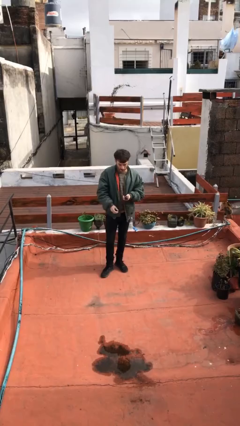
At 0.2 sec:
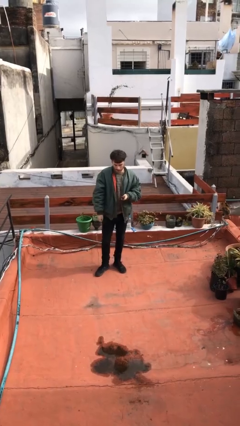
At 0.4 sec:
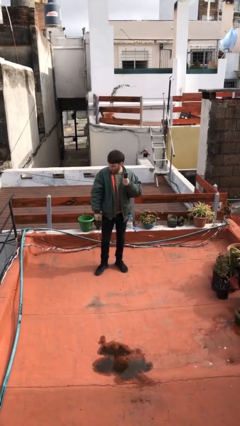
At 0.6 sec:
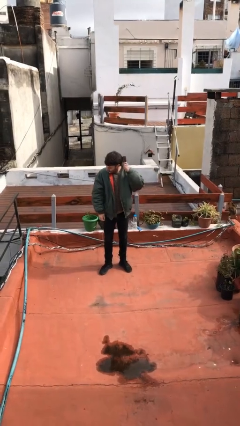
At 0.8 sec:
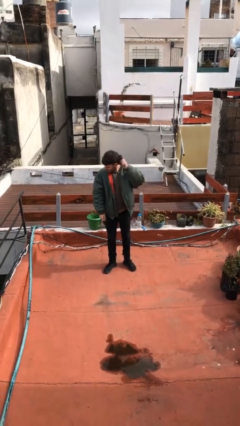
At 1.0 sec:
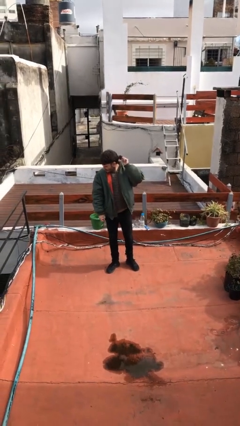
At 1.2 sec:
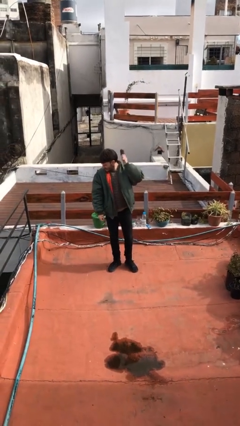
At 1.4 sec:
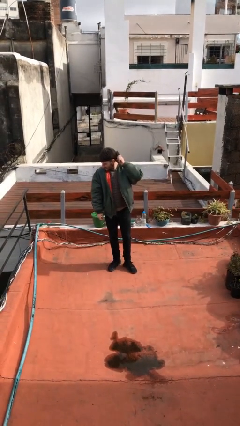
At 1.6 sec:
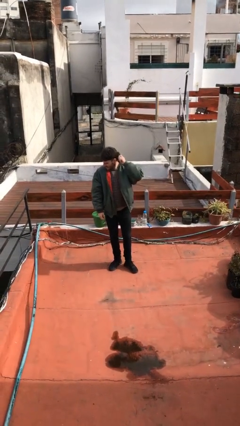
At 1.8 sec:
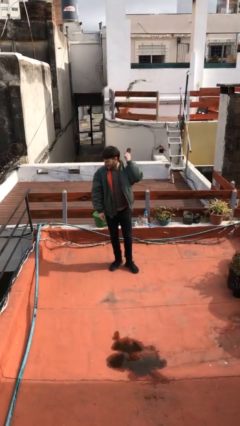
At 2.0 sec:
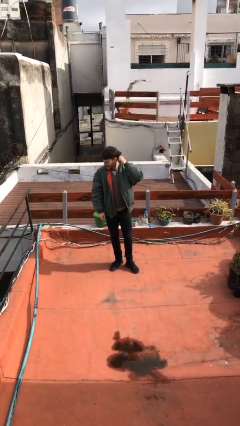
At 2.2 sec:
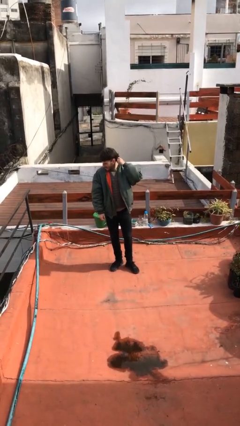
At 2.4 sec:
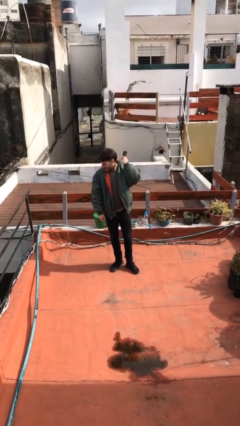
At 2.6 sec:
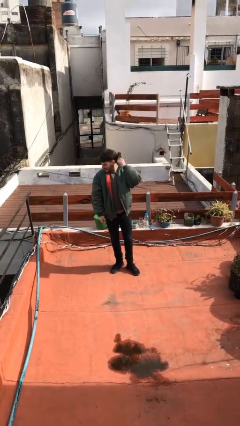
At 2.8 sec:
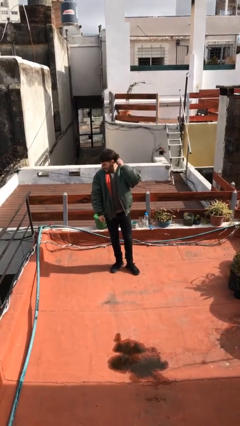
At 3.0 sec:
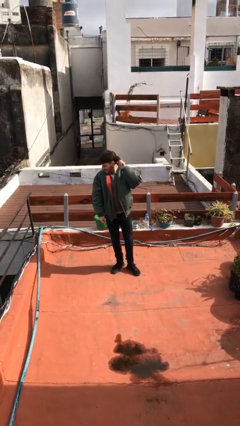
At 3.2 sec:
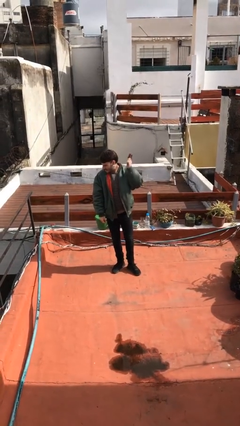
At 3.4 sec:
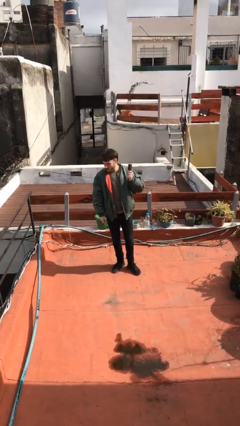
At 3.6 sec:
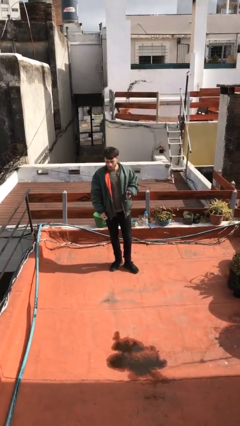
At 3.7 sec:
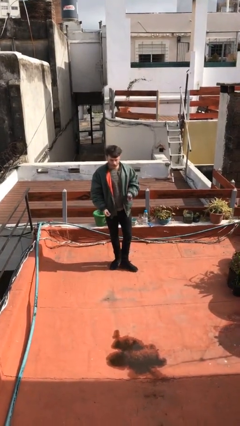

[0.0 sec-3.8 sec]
person brushes hair

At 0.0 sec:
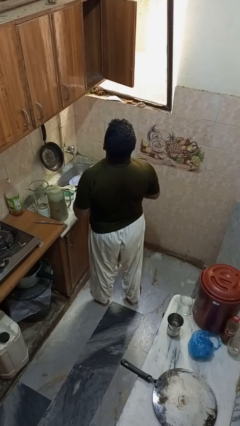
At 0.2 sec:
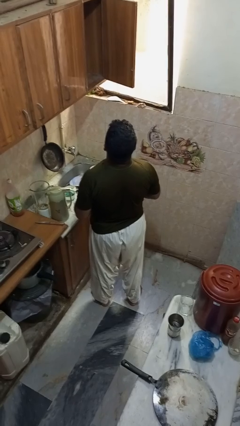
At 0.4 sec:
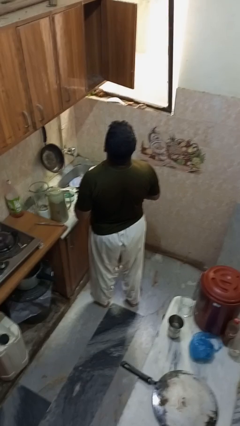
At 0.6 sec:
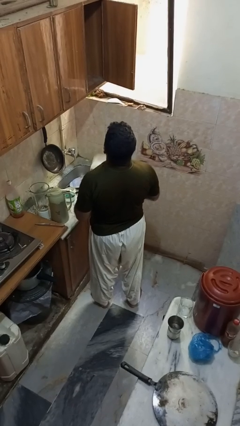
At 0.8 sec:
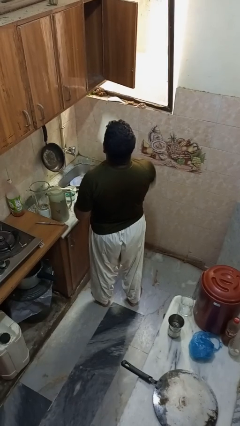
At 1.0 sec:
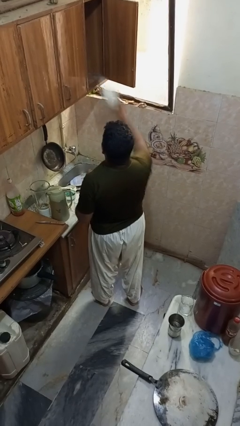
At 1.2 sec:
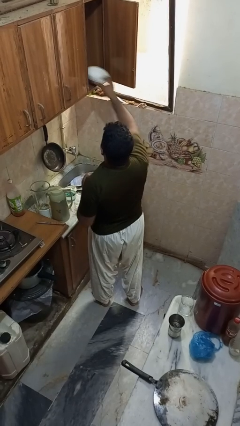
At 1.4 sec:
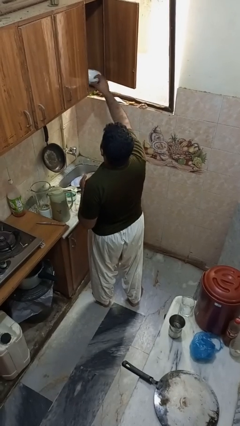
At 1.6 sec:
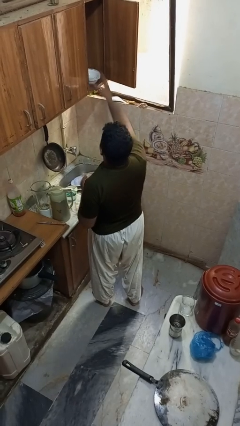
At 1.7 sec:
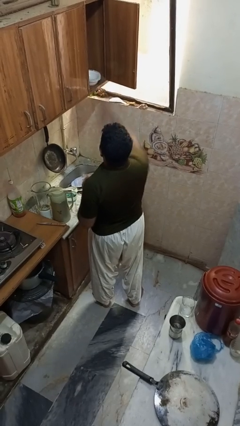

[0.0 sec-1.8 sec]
person puts object in cabinet

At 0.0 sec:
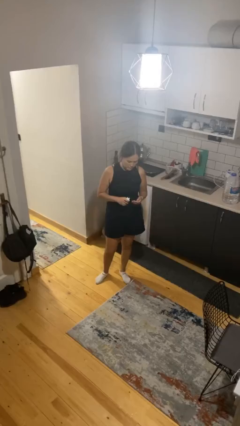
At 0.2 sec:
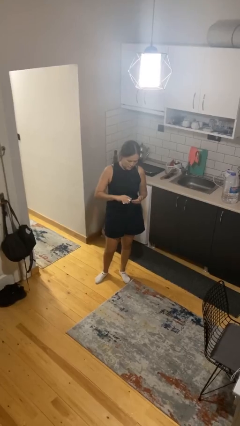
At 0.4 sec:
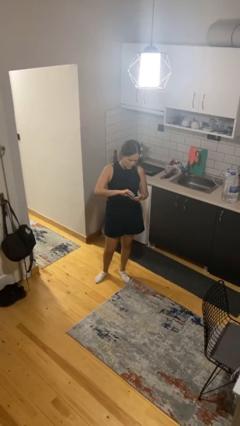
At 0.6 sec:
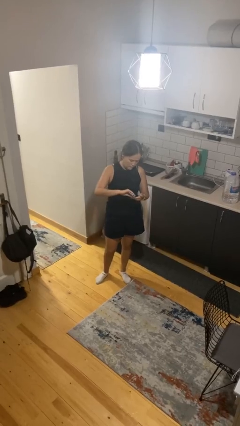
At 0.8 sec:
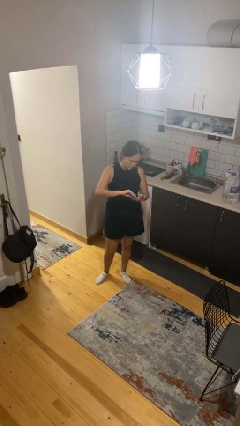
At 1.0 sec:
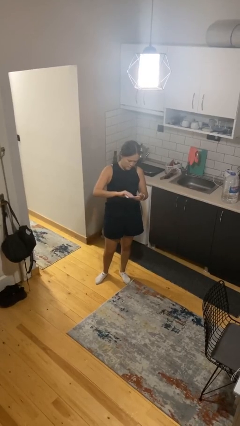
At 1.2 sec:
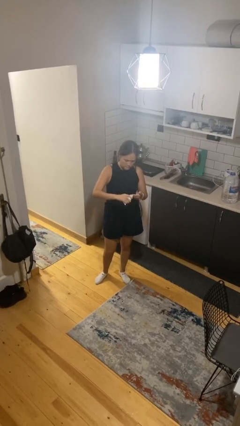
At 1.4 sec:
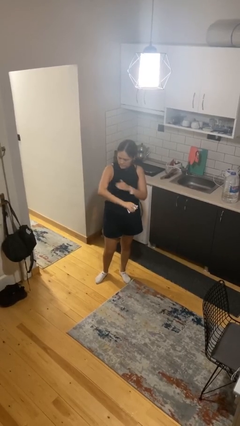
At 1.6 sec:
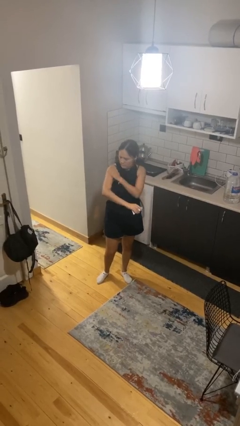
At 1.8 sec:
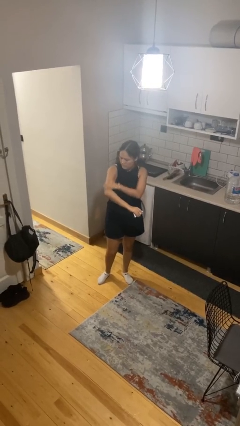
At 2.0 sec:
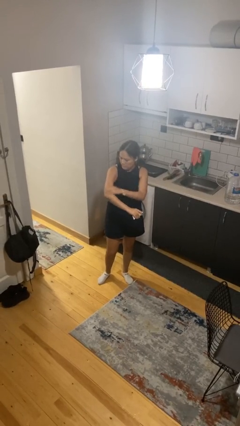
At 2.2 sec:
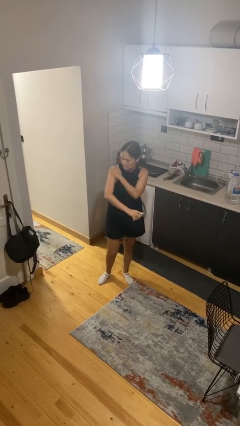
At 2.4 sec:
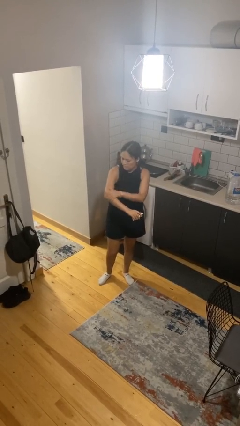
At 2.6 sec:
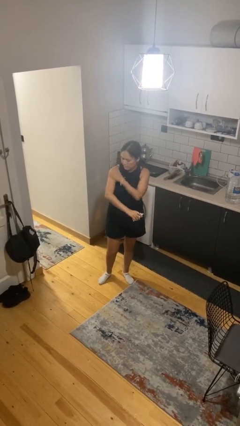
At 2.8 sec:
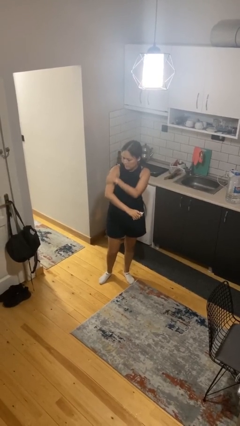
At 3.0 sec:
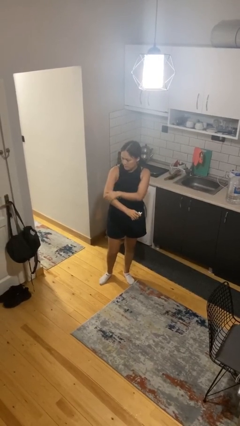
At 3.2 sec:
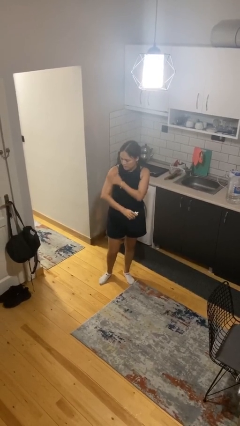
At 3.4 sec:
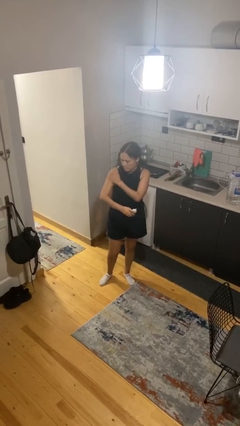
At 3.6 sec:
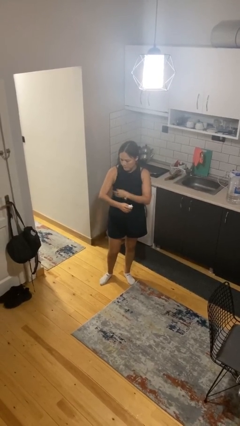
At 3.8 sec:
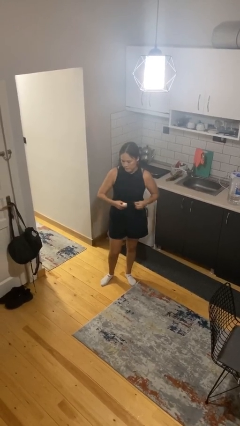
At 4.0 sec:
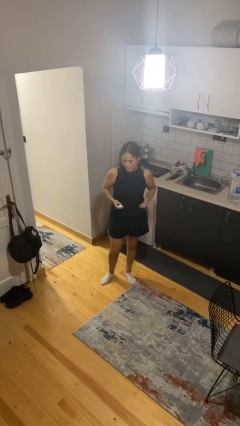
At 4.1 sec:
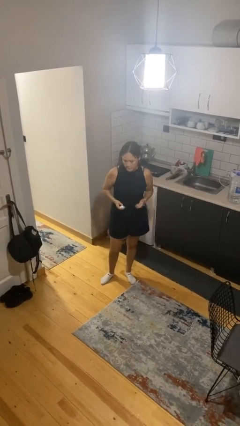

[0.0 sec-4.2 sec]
person applies sunscreen

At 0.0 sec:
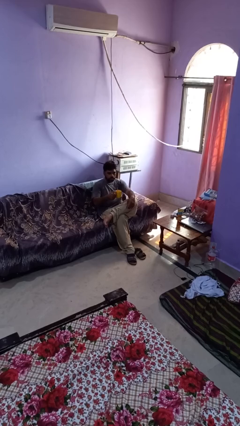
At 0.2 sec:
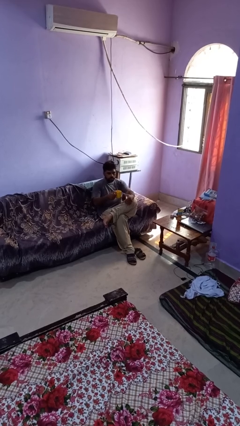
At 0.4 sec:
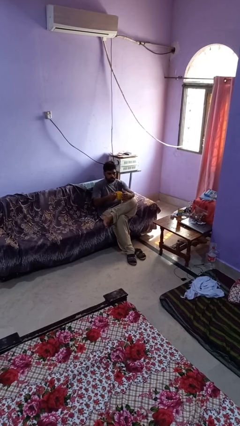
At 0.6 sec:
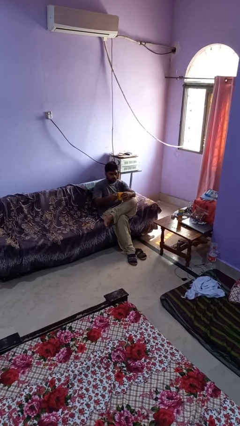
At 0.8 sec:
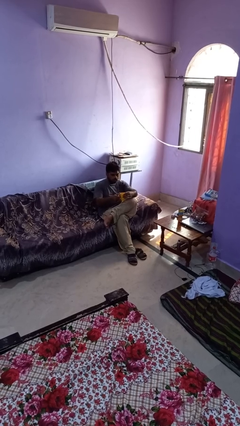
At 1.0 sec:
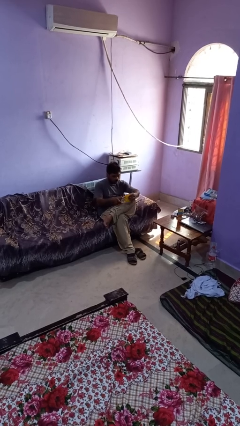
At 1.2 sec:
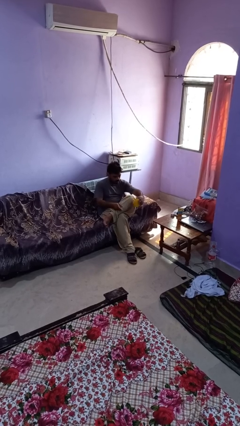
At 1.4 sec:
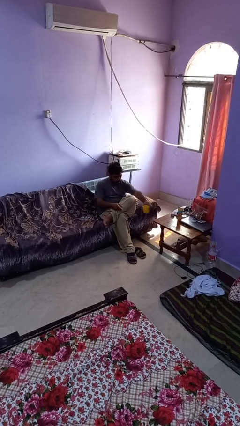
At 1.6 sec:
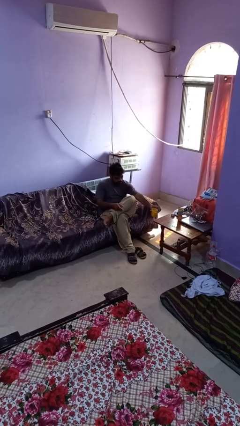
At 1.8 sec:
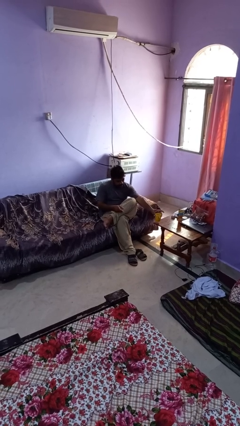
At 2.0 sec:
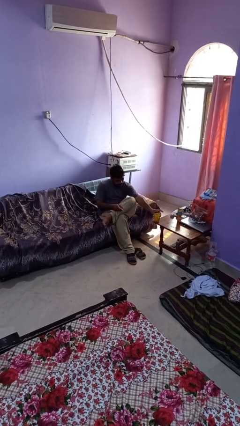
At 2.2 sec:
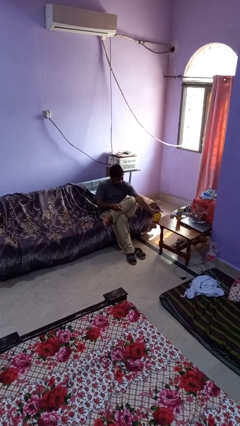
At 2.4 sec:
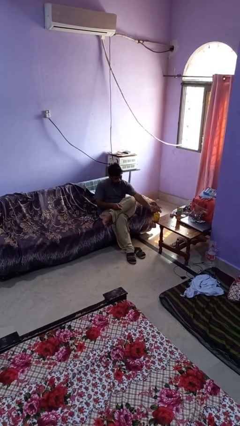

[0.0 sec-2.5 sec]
person puts down object on table

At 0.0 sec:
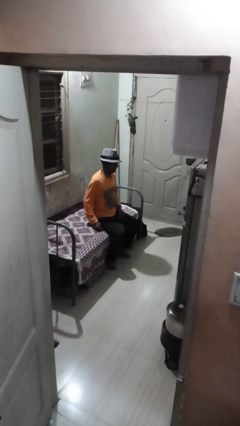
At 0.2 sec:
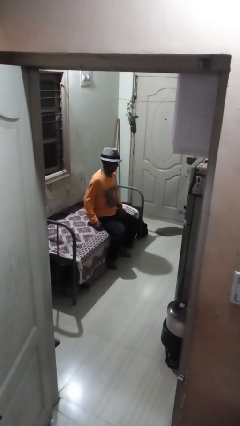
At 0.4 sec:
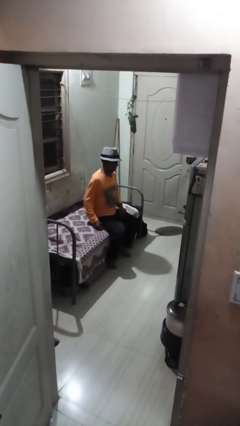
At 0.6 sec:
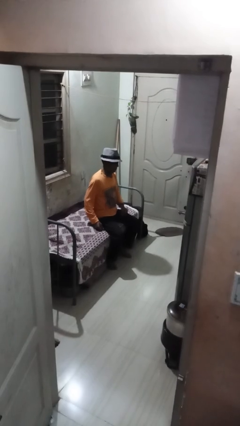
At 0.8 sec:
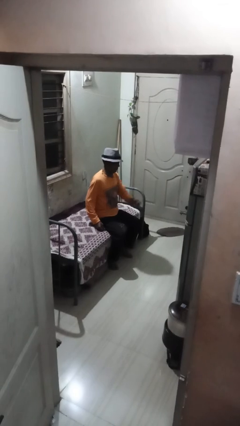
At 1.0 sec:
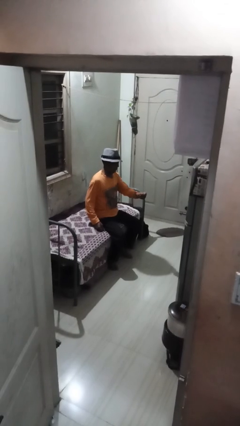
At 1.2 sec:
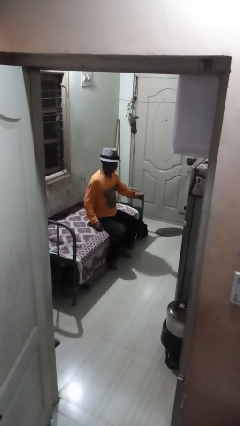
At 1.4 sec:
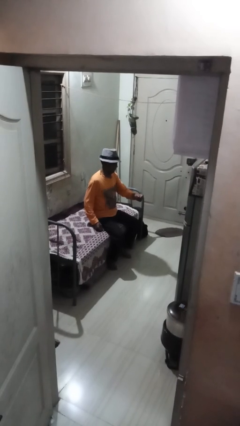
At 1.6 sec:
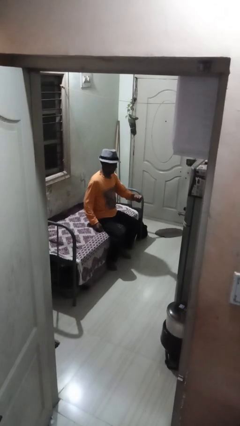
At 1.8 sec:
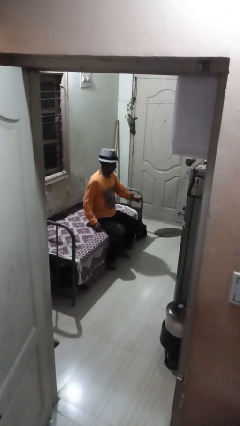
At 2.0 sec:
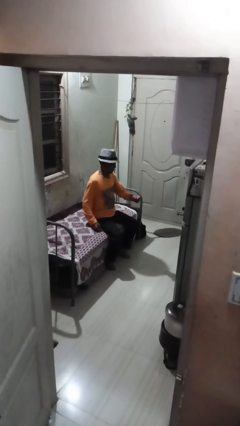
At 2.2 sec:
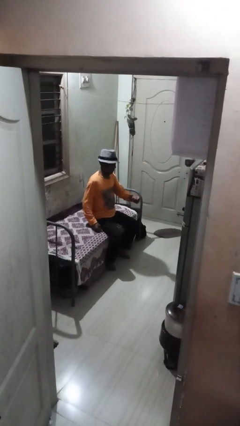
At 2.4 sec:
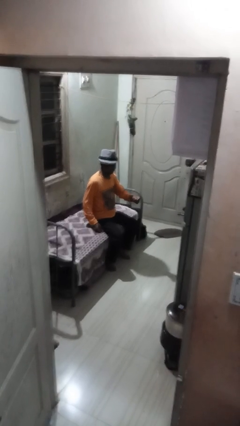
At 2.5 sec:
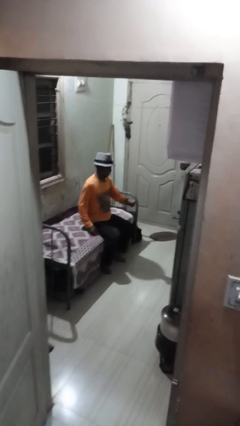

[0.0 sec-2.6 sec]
person snaps fingers

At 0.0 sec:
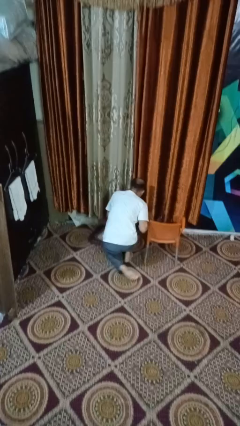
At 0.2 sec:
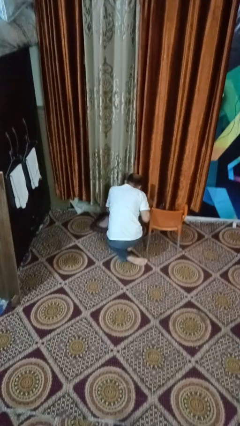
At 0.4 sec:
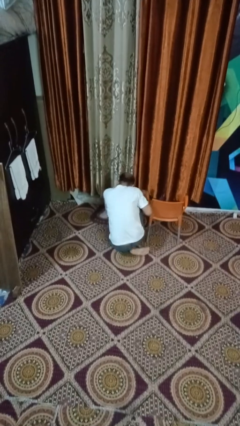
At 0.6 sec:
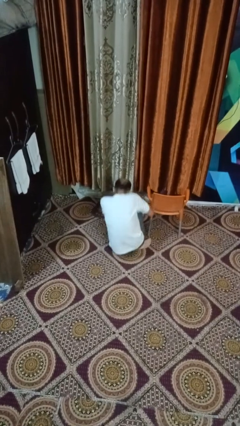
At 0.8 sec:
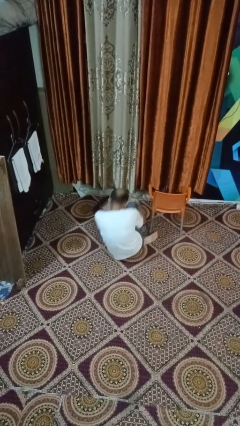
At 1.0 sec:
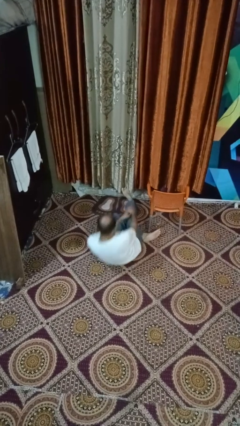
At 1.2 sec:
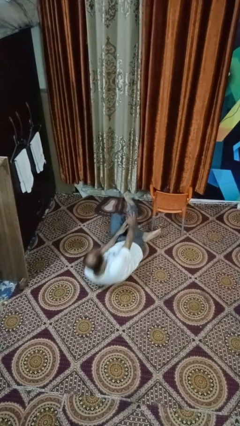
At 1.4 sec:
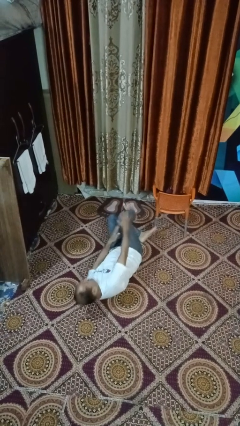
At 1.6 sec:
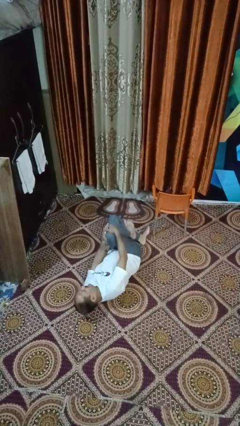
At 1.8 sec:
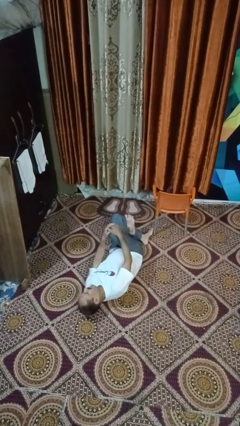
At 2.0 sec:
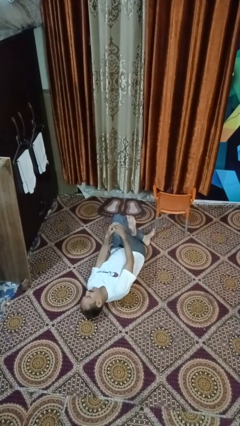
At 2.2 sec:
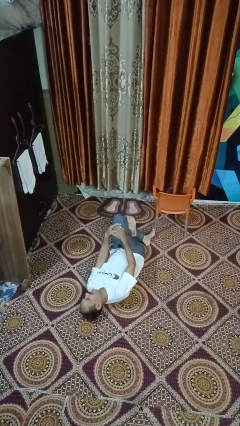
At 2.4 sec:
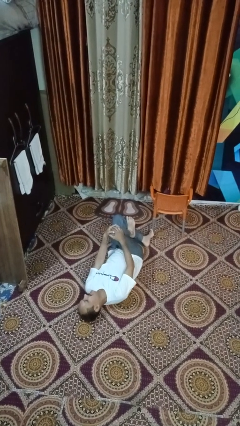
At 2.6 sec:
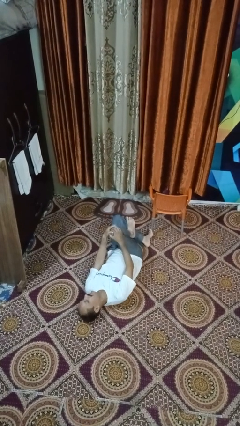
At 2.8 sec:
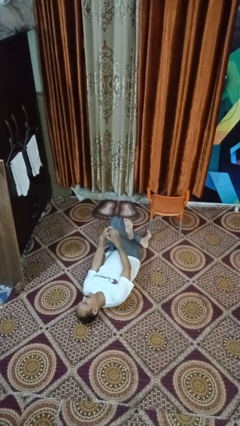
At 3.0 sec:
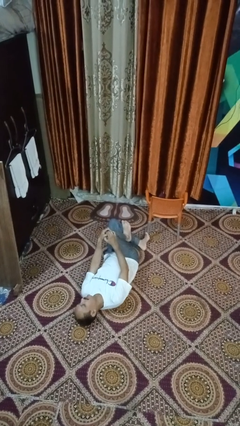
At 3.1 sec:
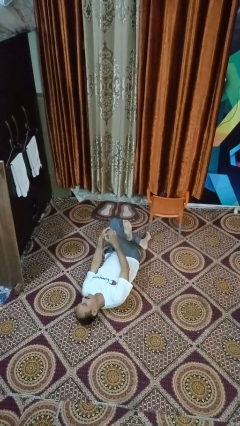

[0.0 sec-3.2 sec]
person lies down on floor
